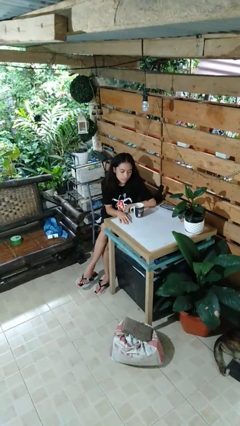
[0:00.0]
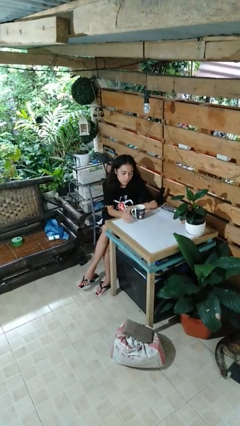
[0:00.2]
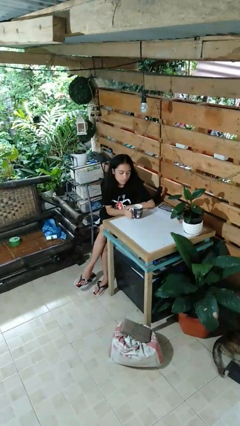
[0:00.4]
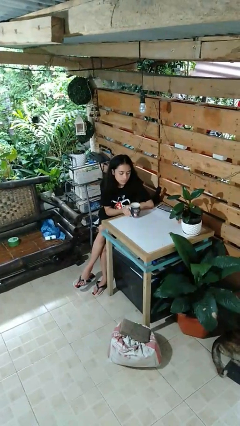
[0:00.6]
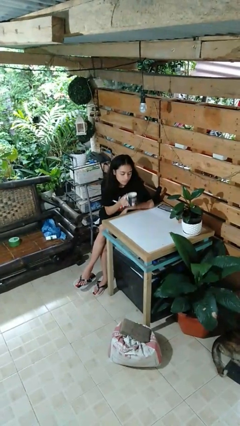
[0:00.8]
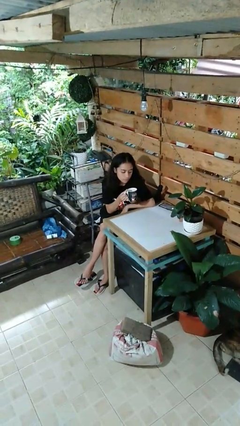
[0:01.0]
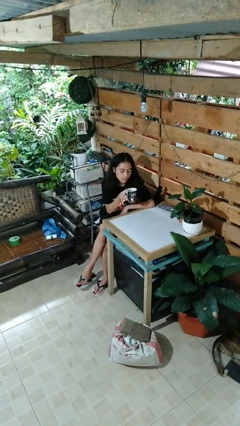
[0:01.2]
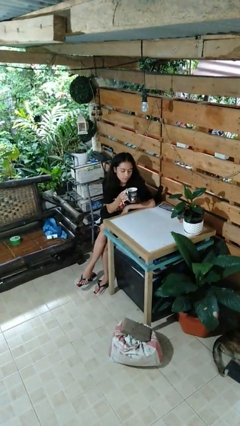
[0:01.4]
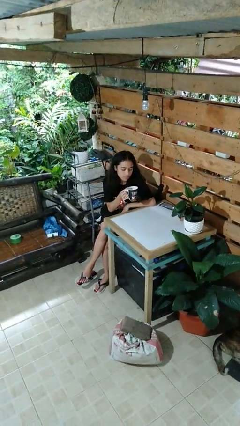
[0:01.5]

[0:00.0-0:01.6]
person picks up object from table

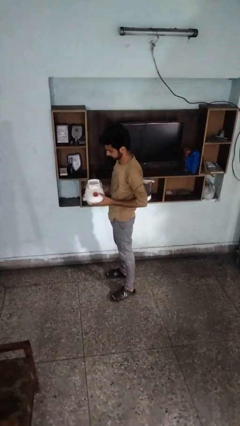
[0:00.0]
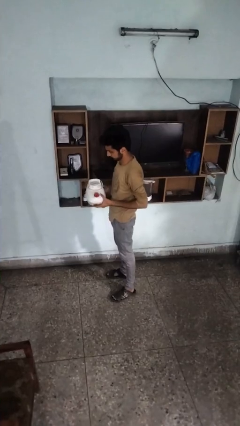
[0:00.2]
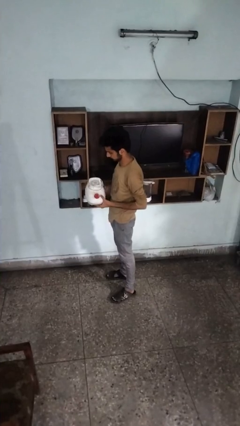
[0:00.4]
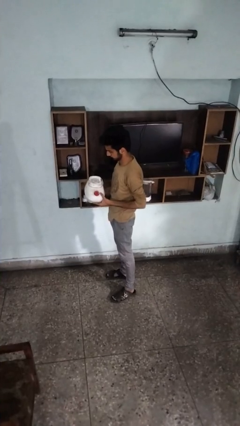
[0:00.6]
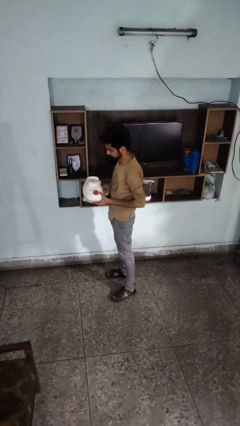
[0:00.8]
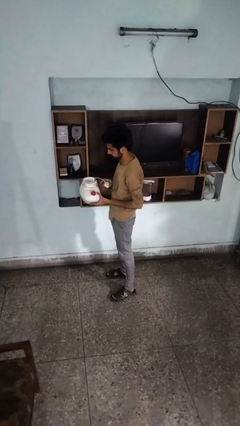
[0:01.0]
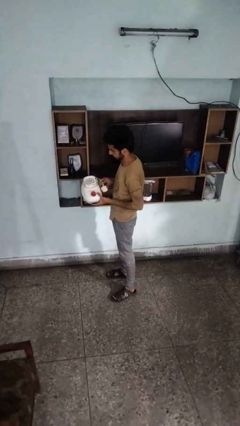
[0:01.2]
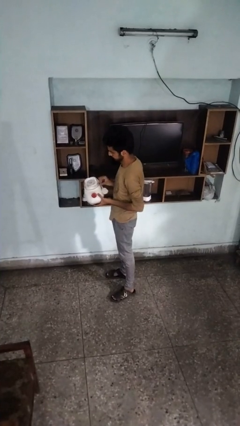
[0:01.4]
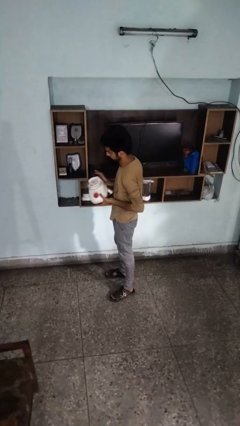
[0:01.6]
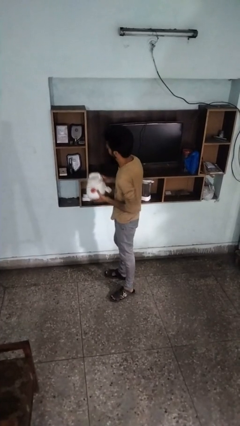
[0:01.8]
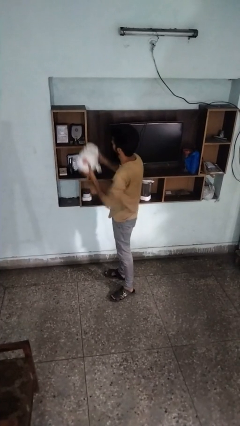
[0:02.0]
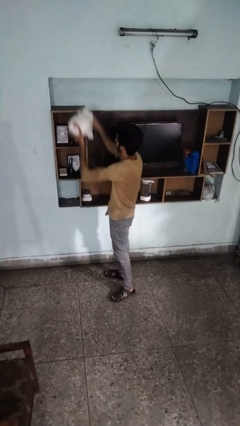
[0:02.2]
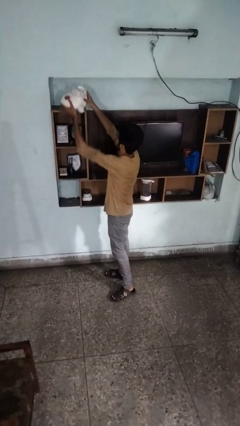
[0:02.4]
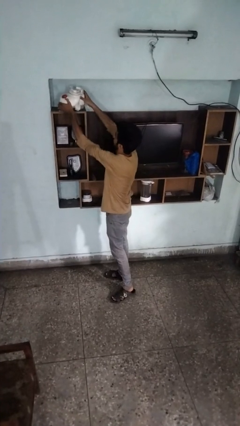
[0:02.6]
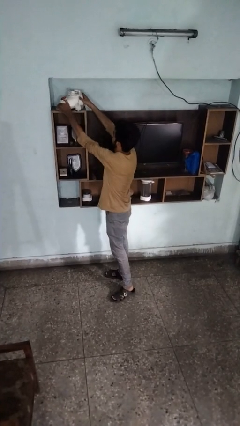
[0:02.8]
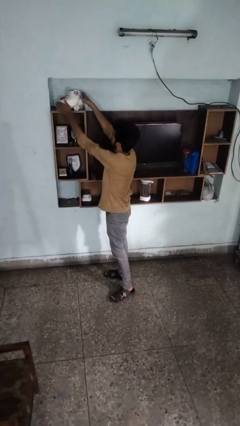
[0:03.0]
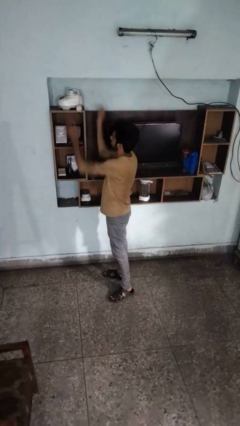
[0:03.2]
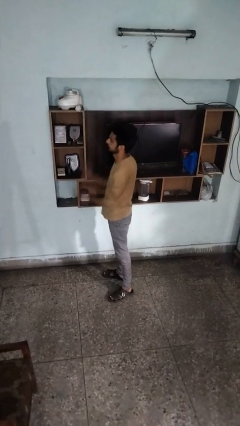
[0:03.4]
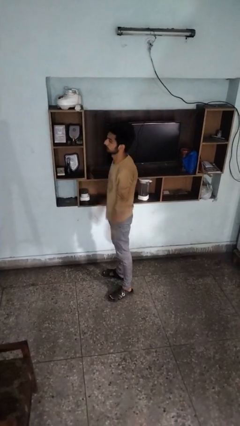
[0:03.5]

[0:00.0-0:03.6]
person puts down object on shelf

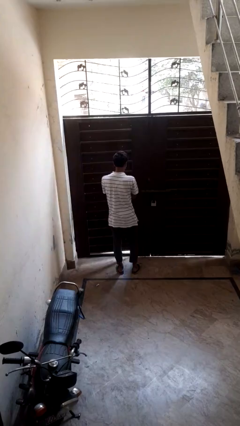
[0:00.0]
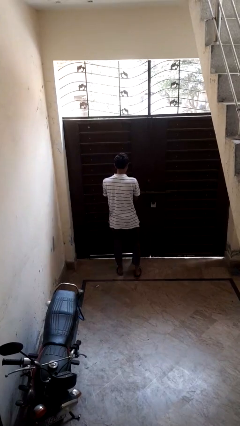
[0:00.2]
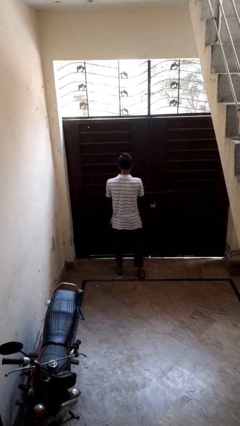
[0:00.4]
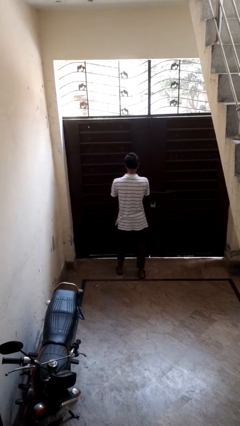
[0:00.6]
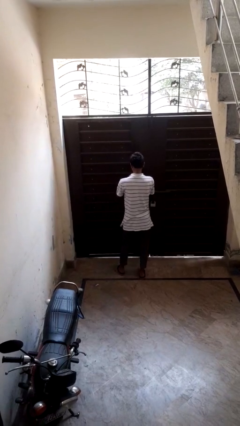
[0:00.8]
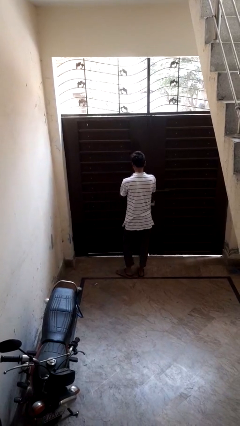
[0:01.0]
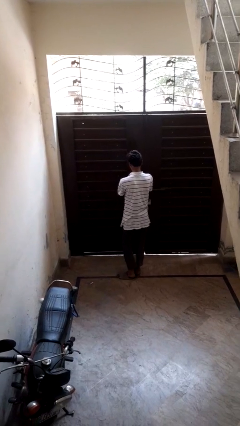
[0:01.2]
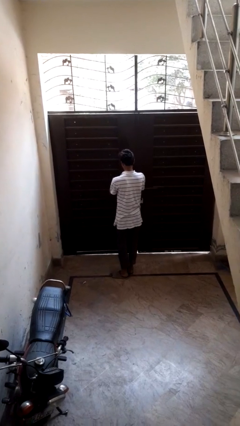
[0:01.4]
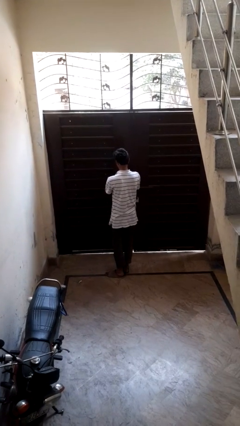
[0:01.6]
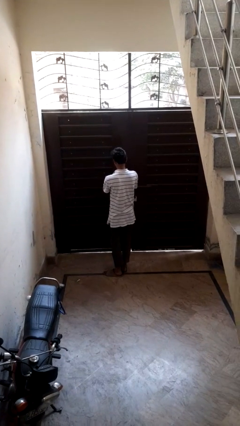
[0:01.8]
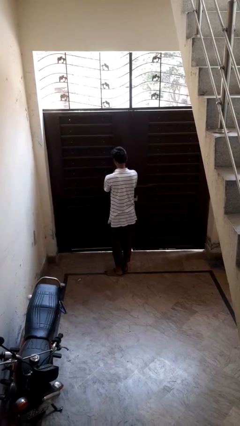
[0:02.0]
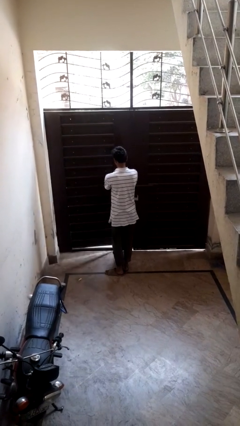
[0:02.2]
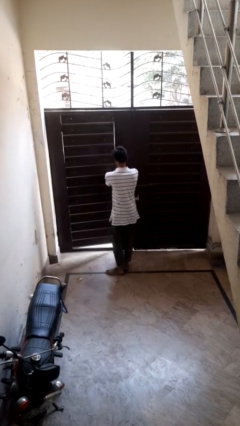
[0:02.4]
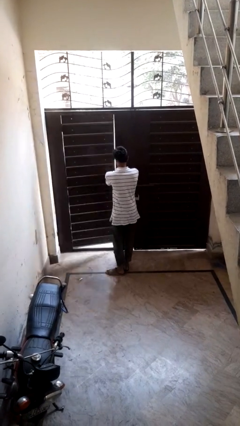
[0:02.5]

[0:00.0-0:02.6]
person closes facility door

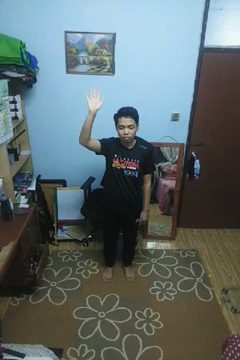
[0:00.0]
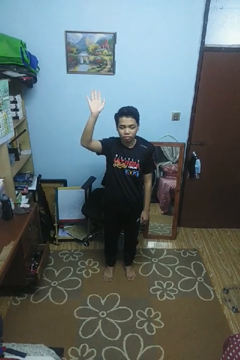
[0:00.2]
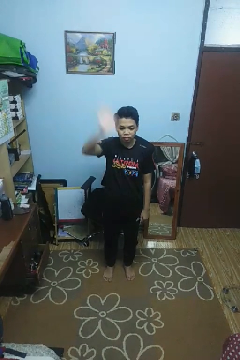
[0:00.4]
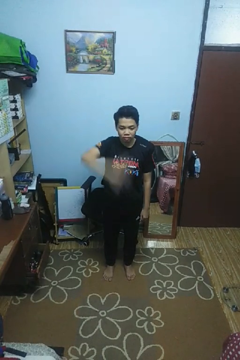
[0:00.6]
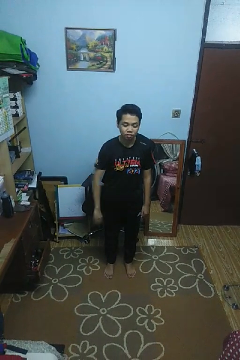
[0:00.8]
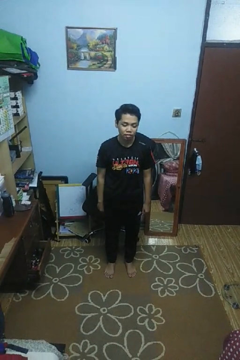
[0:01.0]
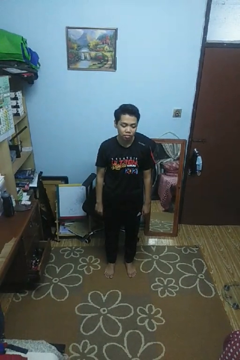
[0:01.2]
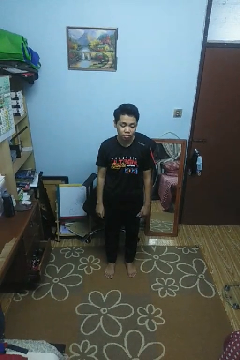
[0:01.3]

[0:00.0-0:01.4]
person gestures swipe down

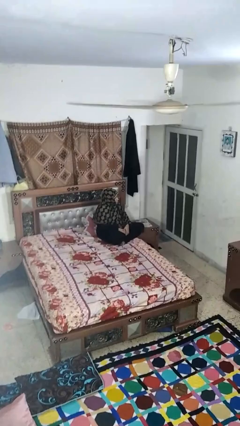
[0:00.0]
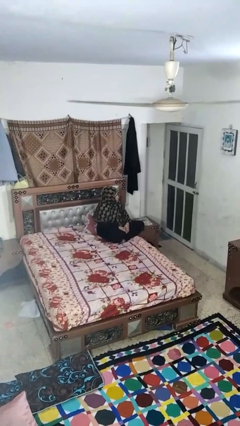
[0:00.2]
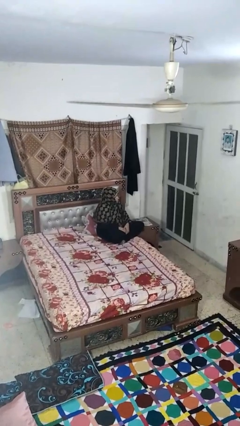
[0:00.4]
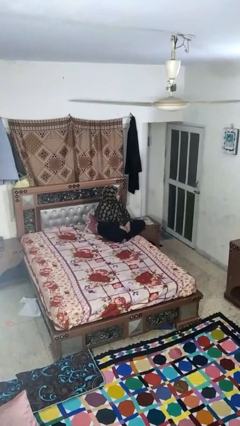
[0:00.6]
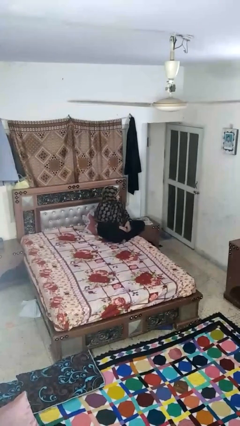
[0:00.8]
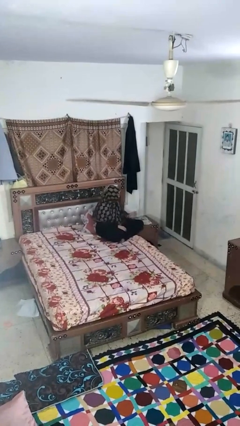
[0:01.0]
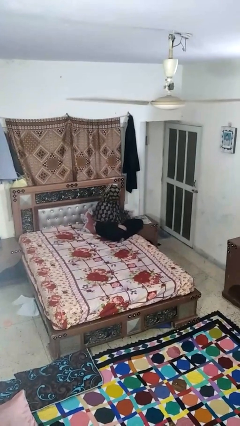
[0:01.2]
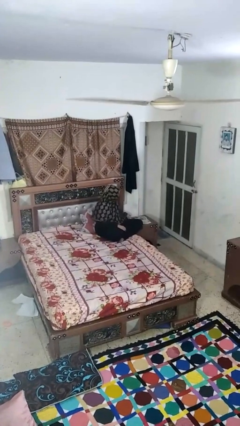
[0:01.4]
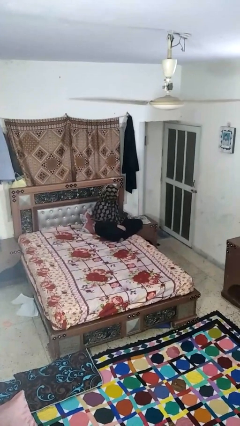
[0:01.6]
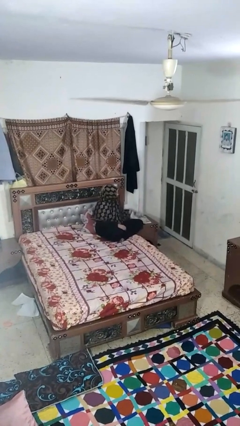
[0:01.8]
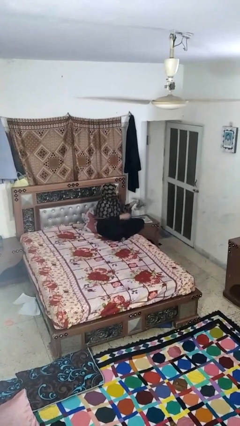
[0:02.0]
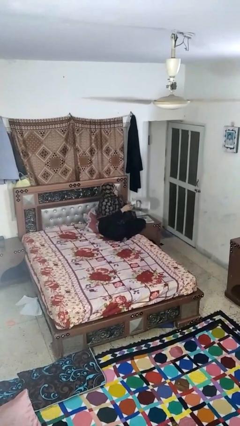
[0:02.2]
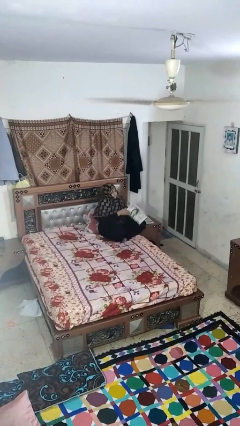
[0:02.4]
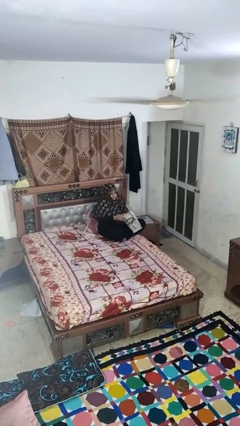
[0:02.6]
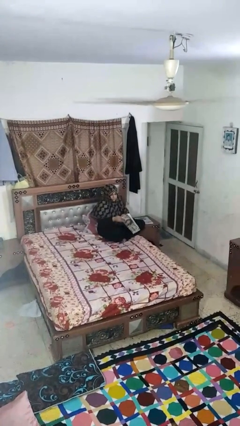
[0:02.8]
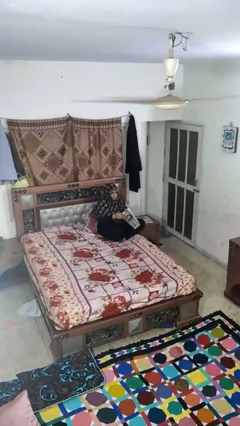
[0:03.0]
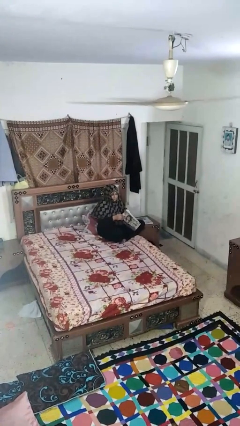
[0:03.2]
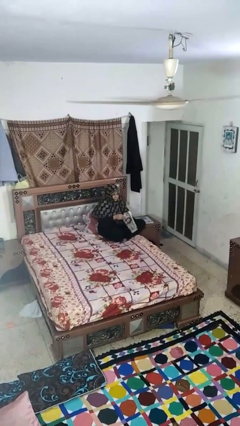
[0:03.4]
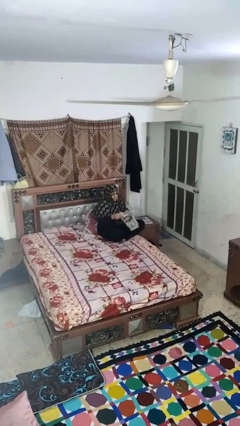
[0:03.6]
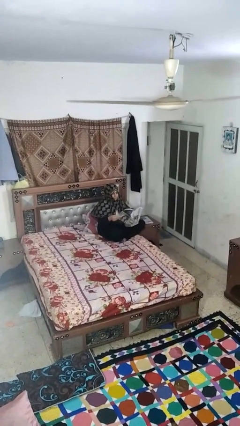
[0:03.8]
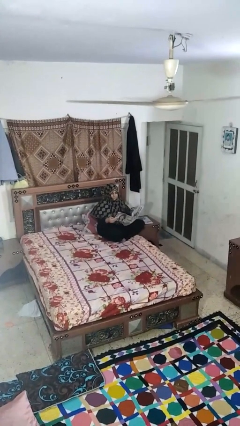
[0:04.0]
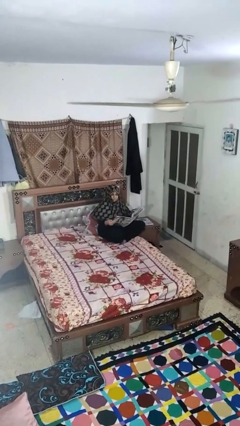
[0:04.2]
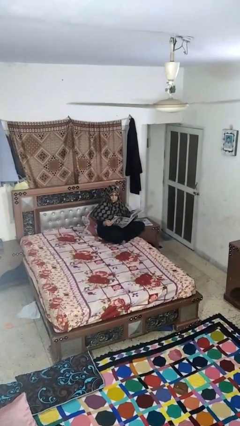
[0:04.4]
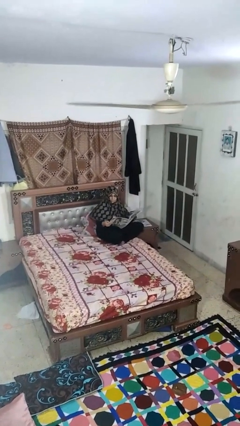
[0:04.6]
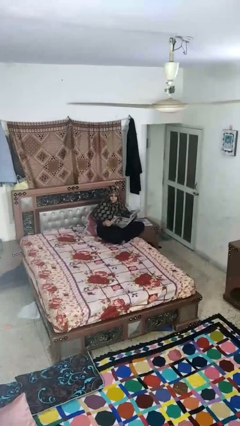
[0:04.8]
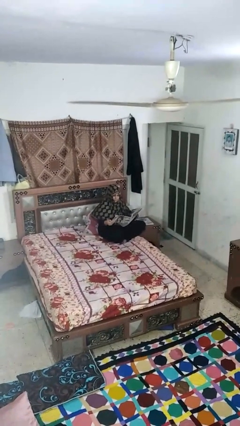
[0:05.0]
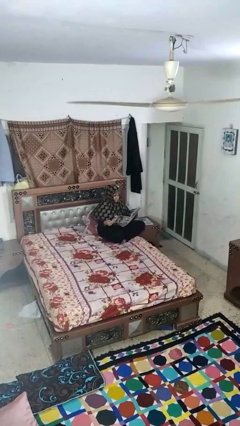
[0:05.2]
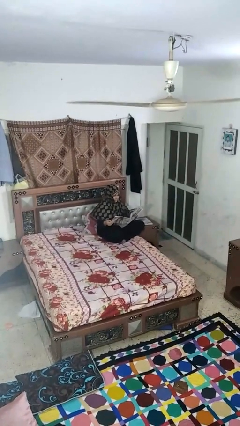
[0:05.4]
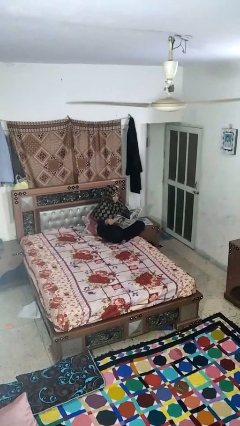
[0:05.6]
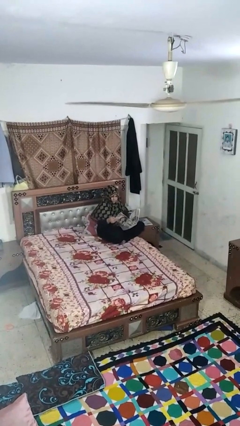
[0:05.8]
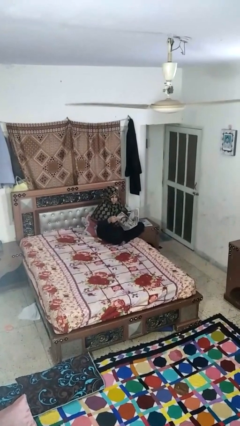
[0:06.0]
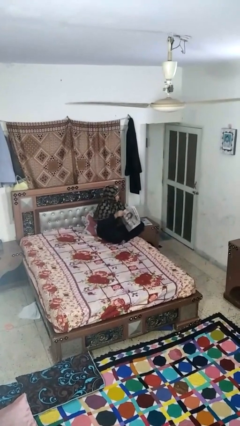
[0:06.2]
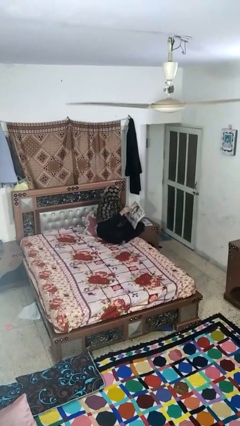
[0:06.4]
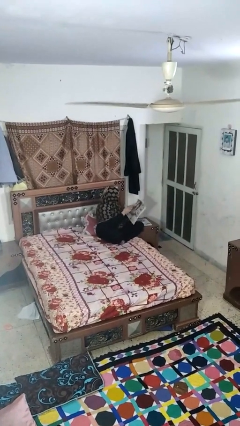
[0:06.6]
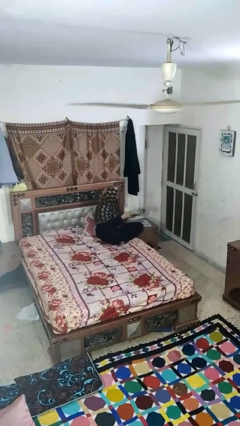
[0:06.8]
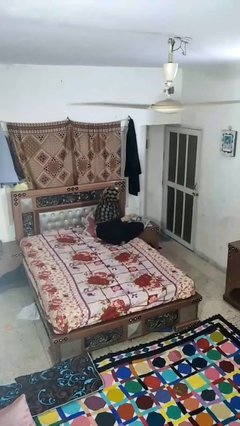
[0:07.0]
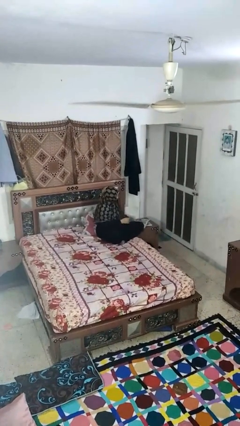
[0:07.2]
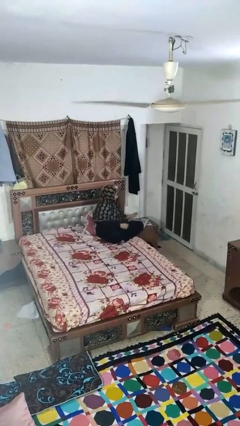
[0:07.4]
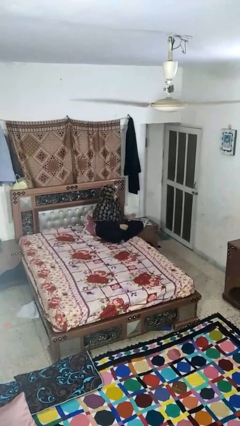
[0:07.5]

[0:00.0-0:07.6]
person reads magazine

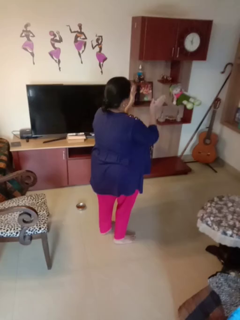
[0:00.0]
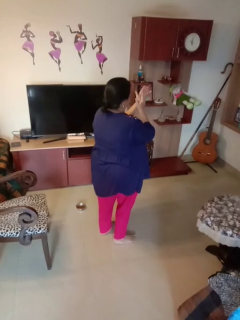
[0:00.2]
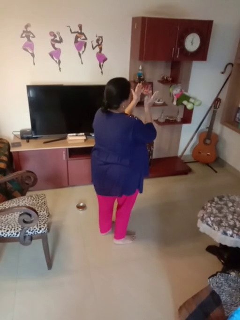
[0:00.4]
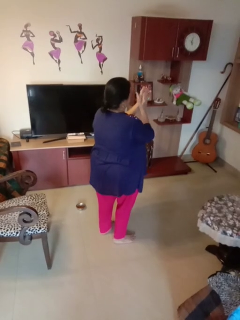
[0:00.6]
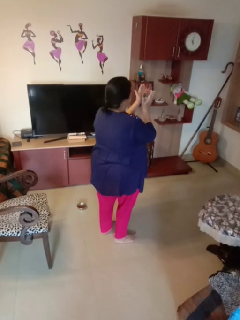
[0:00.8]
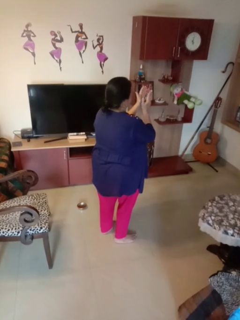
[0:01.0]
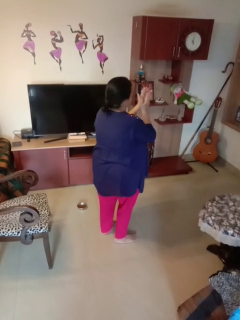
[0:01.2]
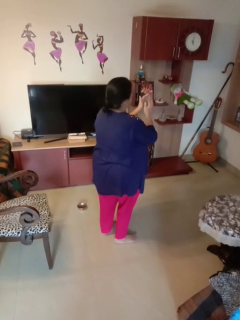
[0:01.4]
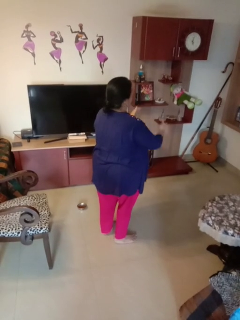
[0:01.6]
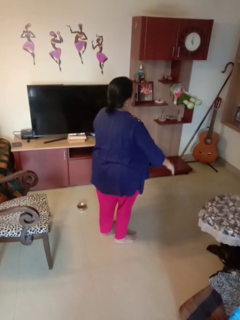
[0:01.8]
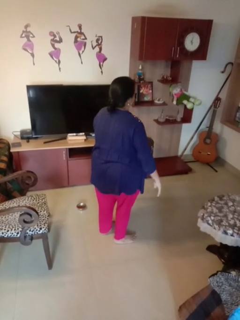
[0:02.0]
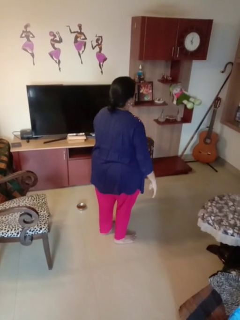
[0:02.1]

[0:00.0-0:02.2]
person claps hands
